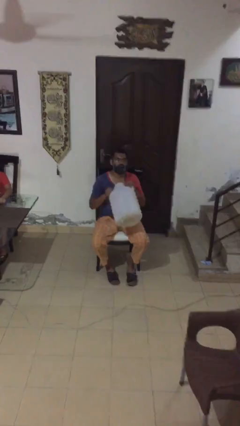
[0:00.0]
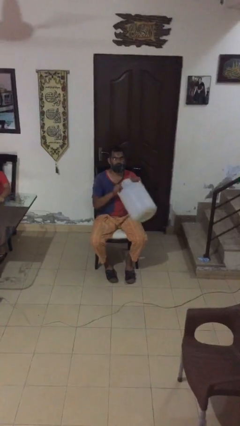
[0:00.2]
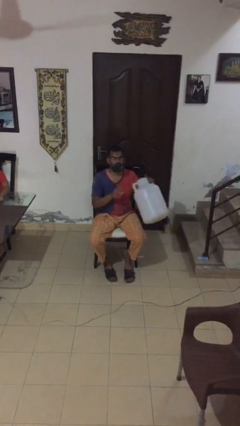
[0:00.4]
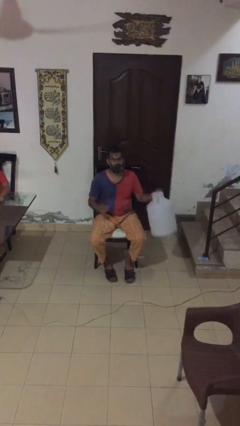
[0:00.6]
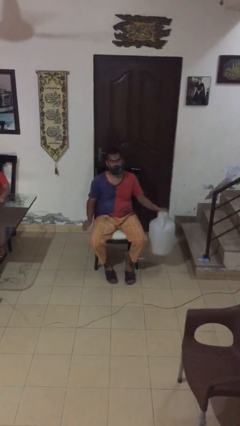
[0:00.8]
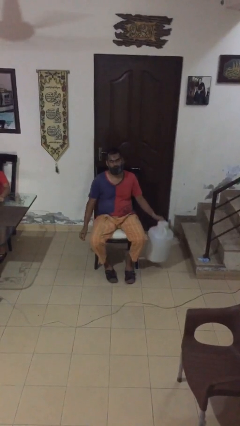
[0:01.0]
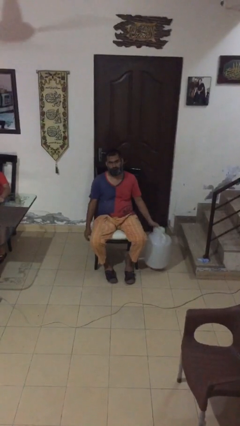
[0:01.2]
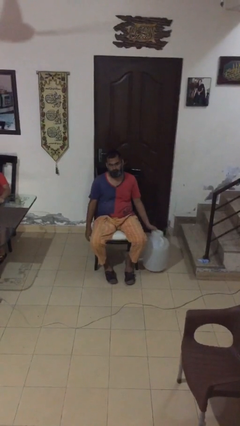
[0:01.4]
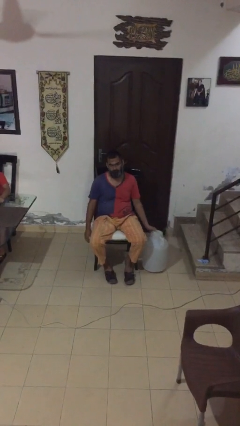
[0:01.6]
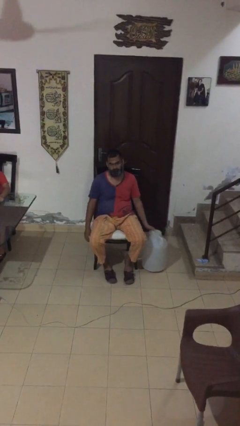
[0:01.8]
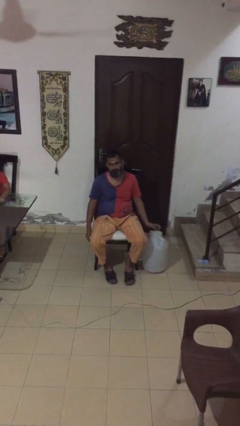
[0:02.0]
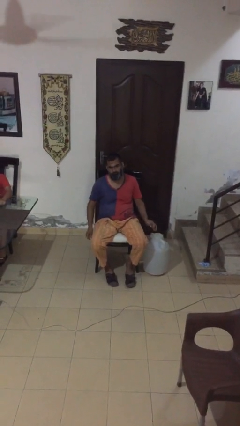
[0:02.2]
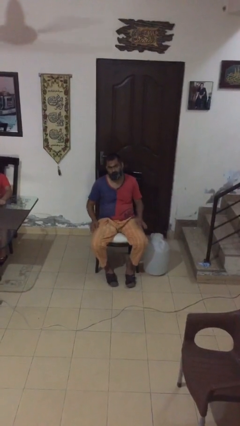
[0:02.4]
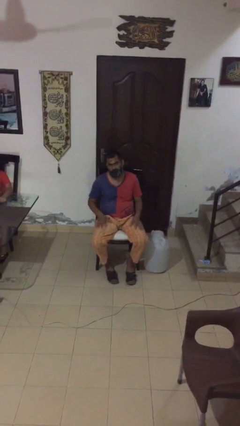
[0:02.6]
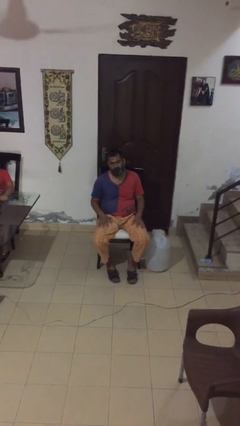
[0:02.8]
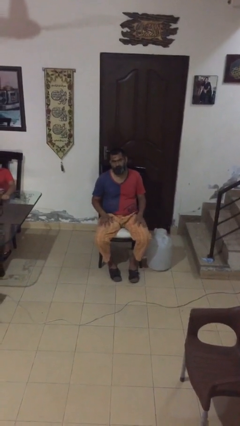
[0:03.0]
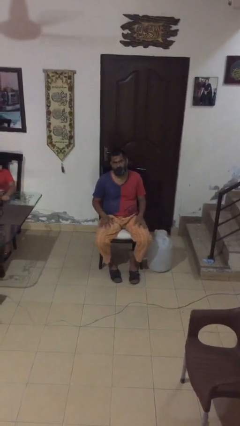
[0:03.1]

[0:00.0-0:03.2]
person puts down object on floor

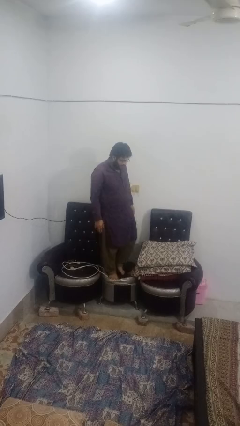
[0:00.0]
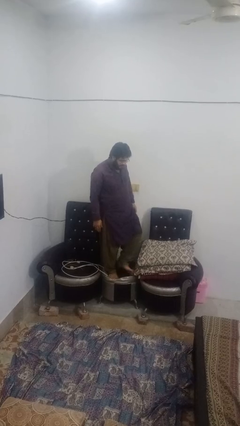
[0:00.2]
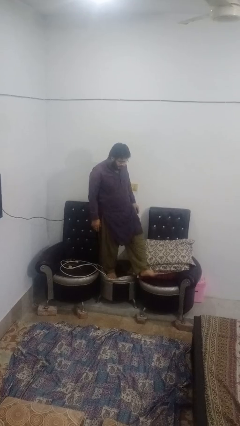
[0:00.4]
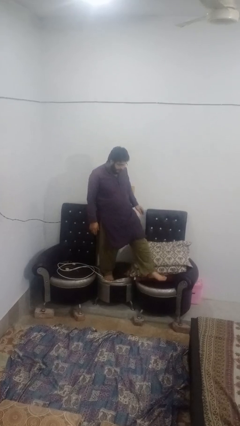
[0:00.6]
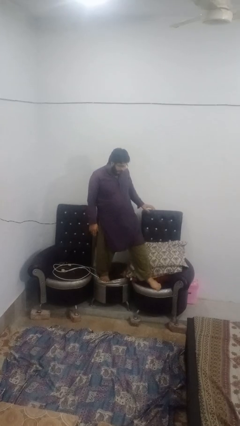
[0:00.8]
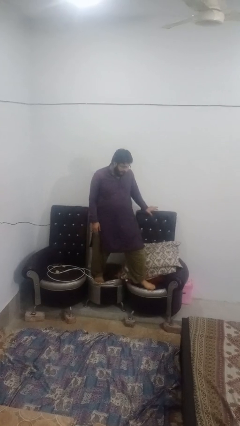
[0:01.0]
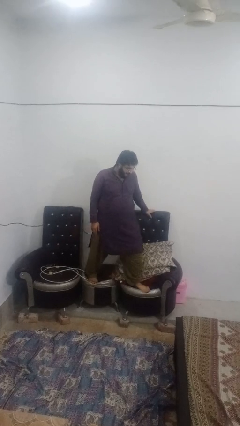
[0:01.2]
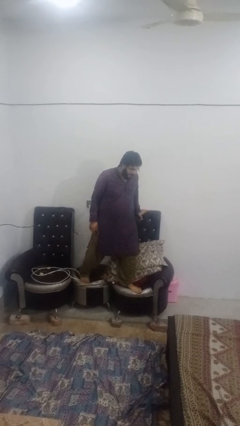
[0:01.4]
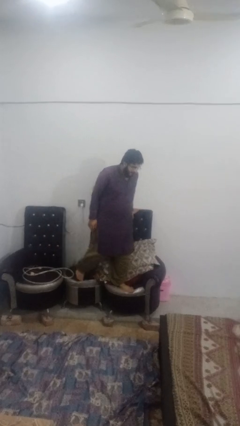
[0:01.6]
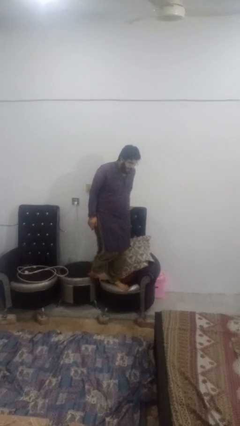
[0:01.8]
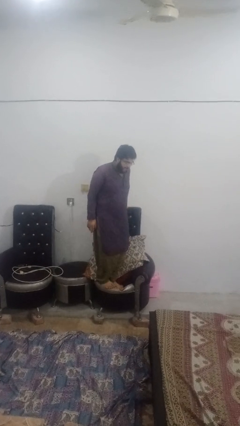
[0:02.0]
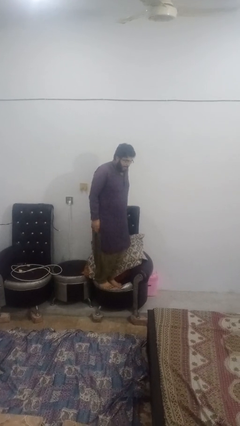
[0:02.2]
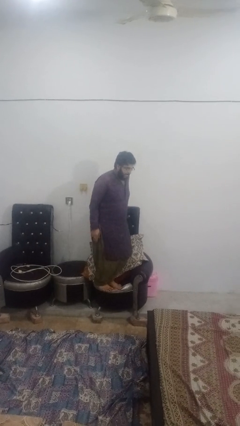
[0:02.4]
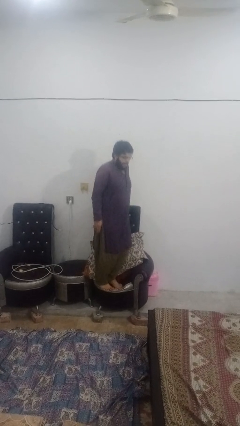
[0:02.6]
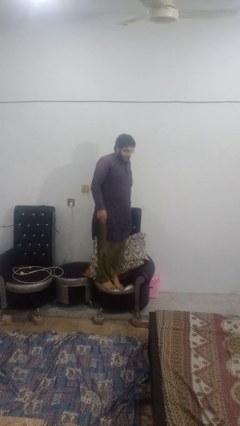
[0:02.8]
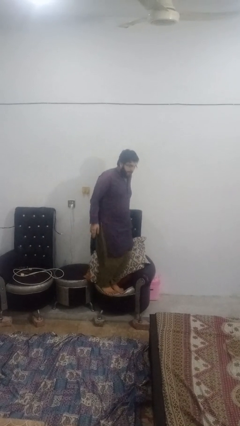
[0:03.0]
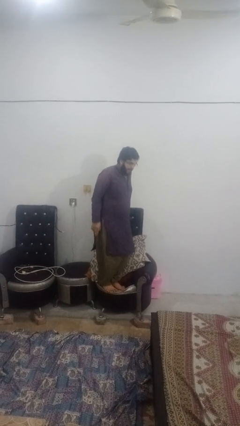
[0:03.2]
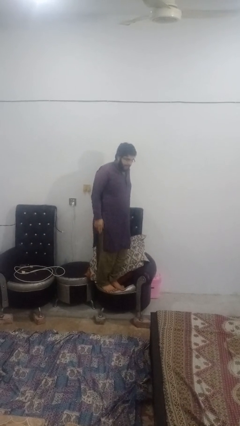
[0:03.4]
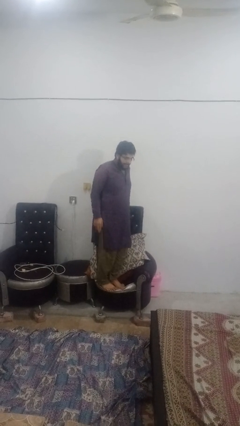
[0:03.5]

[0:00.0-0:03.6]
person jumps on couch

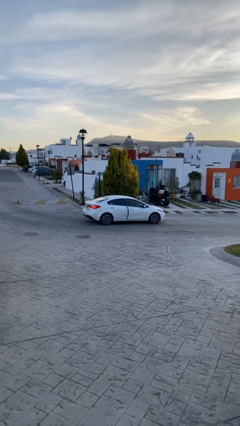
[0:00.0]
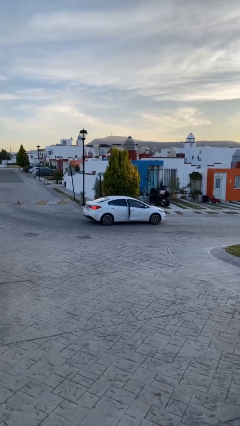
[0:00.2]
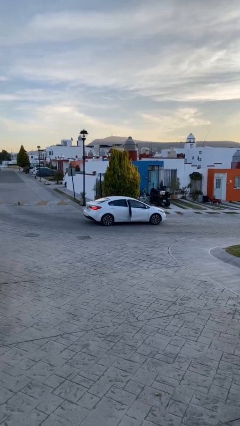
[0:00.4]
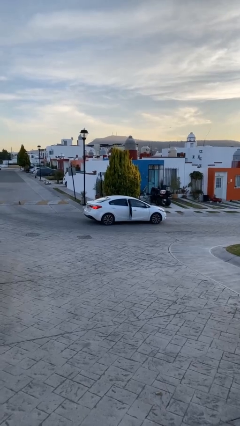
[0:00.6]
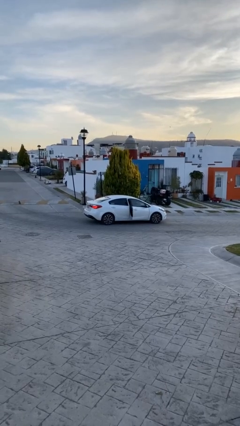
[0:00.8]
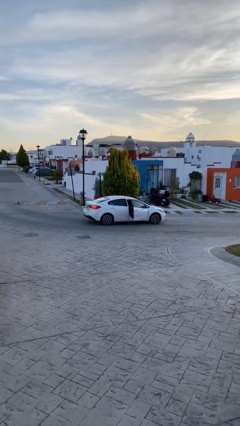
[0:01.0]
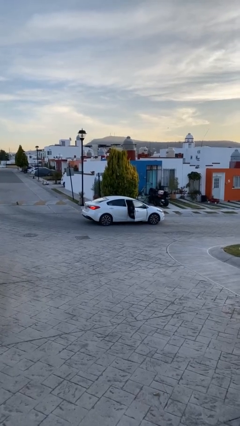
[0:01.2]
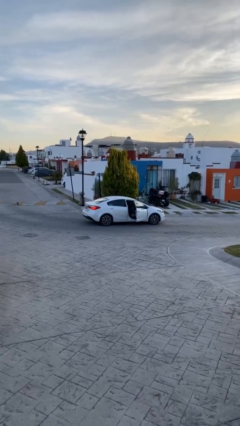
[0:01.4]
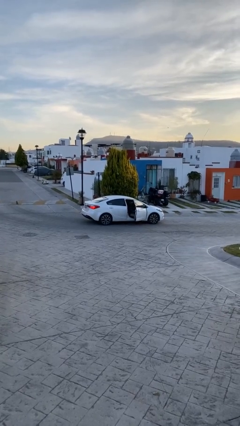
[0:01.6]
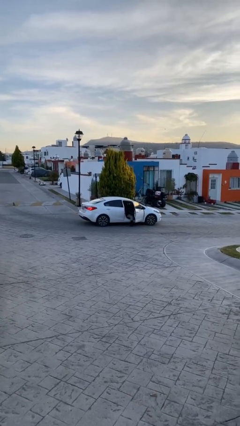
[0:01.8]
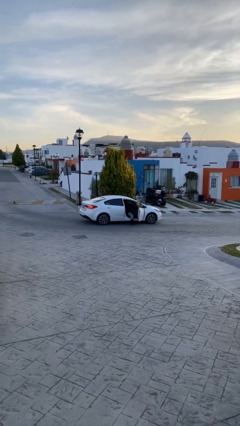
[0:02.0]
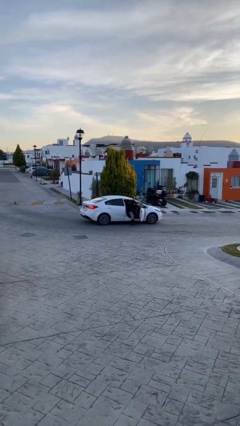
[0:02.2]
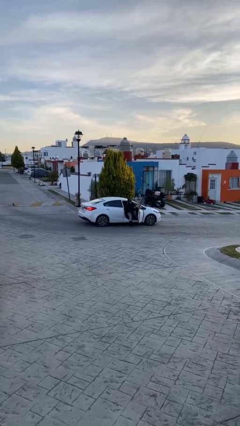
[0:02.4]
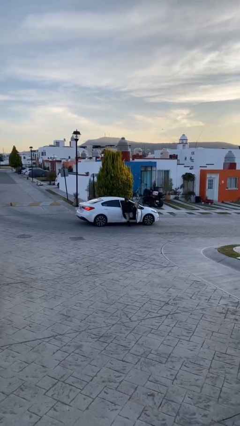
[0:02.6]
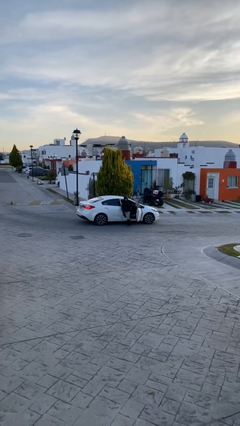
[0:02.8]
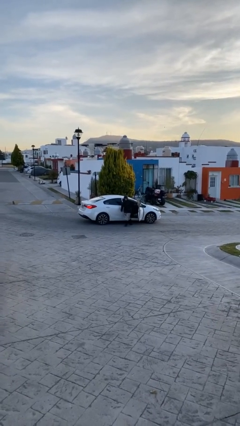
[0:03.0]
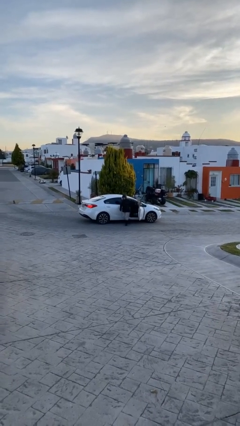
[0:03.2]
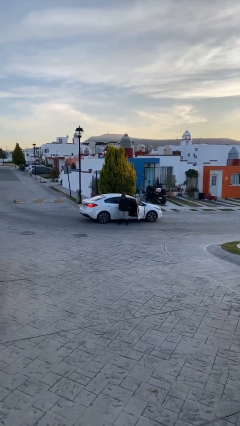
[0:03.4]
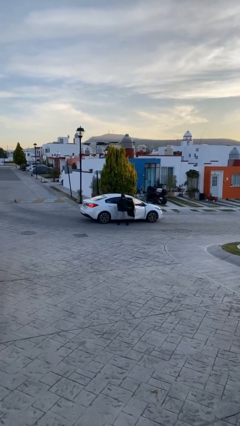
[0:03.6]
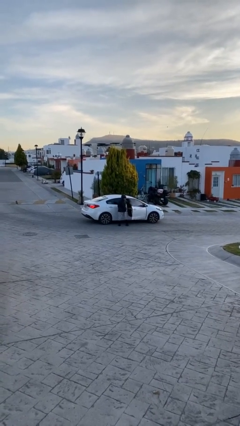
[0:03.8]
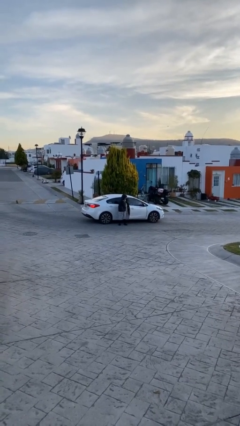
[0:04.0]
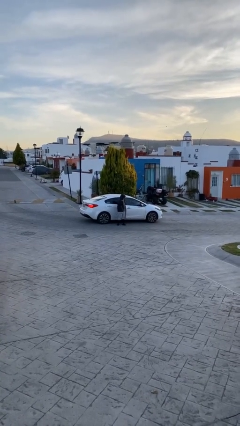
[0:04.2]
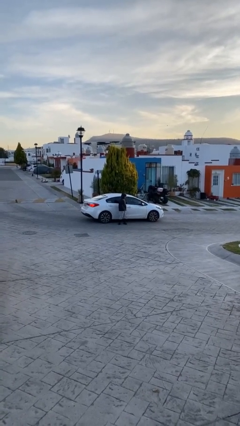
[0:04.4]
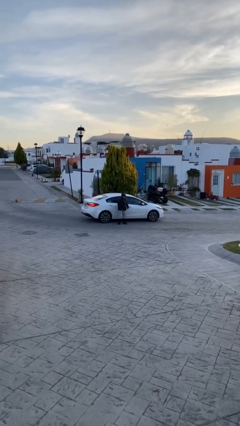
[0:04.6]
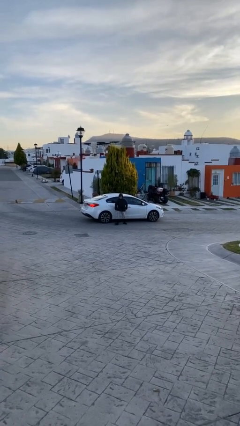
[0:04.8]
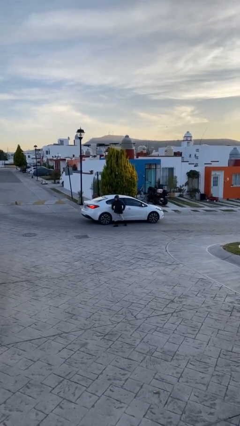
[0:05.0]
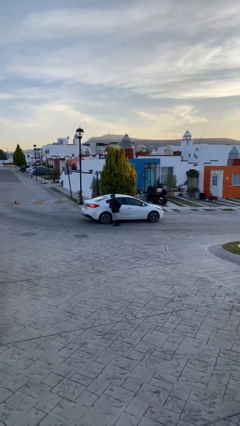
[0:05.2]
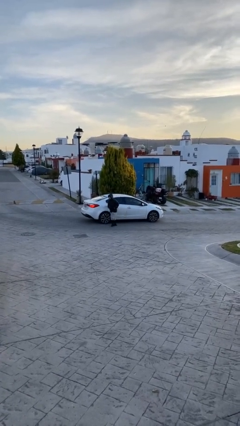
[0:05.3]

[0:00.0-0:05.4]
car drops off person

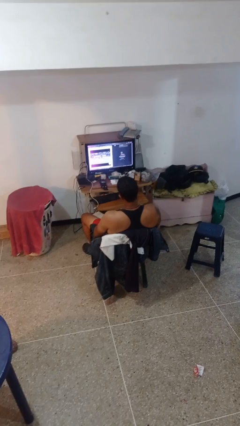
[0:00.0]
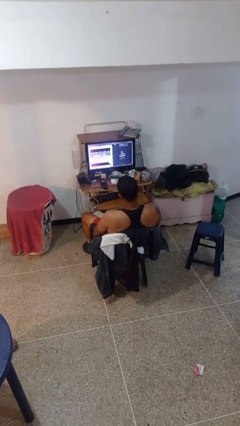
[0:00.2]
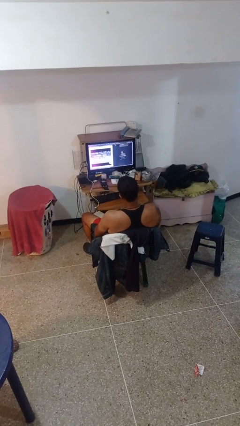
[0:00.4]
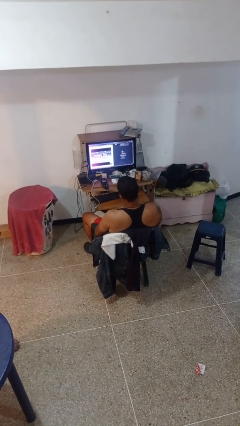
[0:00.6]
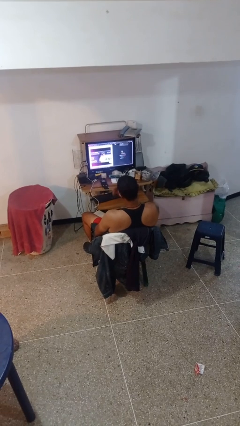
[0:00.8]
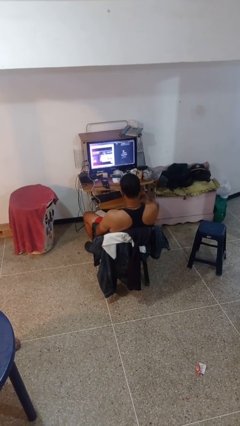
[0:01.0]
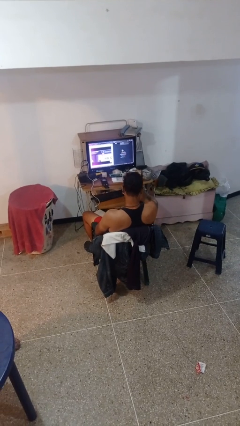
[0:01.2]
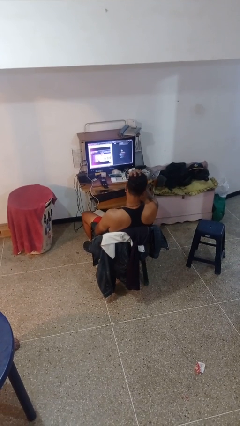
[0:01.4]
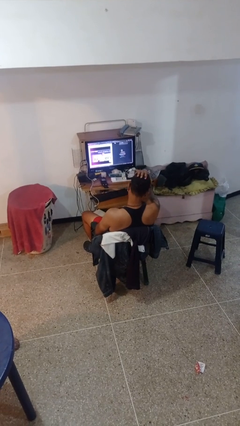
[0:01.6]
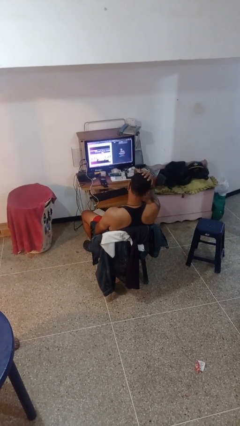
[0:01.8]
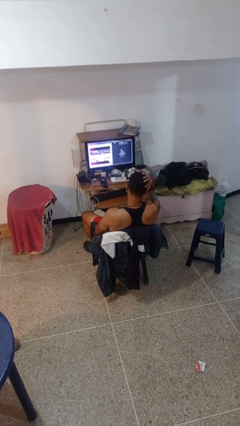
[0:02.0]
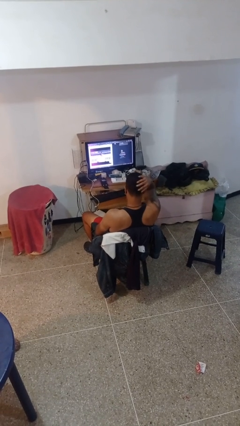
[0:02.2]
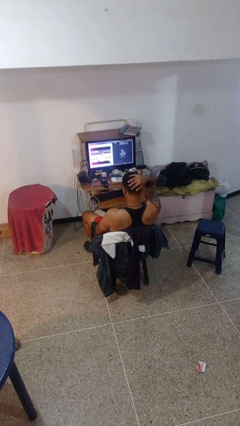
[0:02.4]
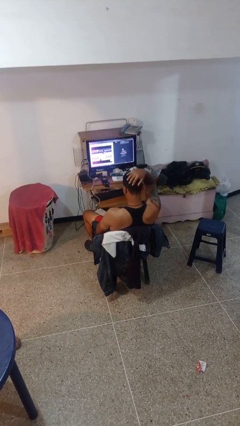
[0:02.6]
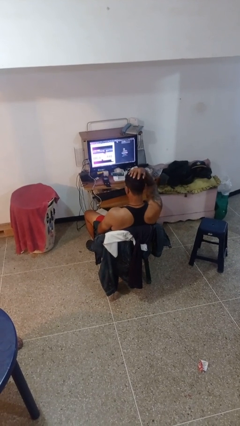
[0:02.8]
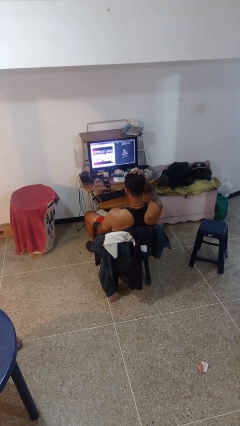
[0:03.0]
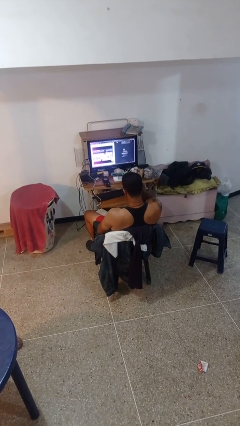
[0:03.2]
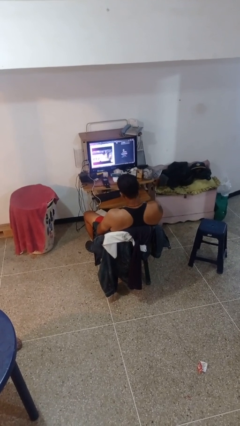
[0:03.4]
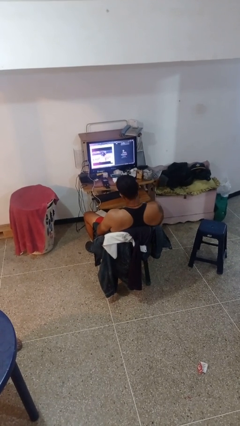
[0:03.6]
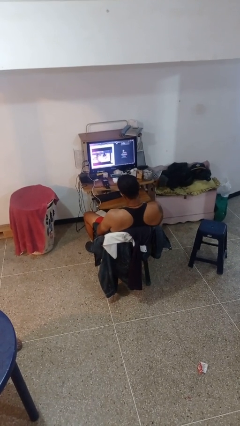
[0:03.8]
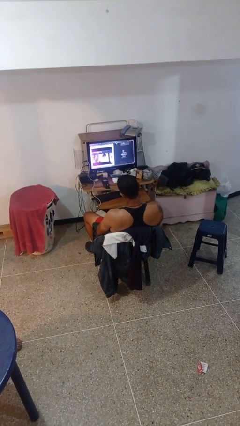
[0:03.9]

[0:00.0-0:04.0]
person pats head

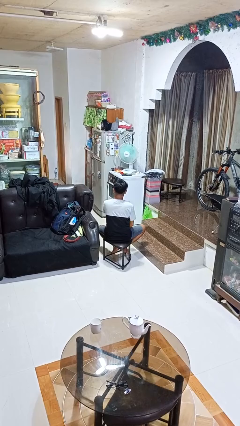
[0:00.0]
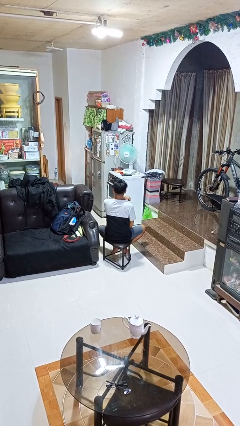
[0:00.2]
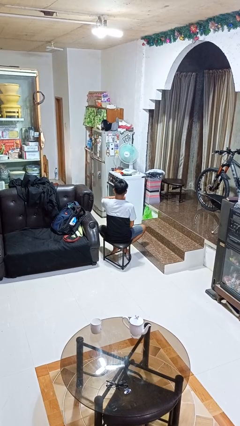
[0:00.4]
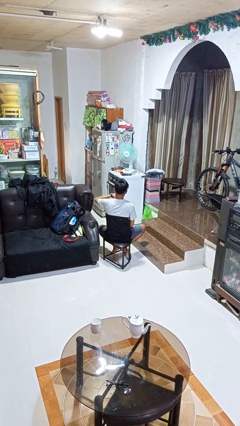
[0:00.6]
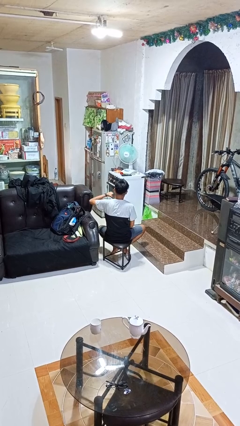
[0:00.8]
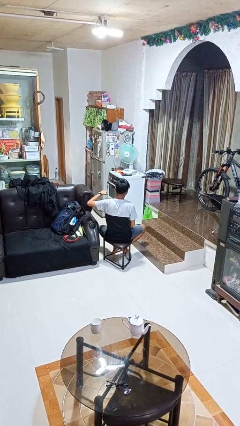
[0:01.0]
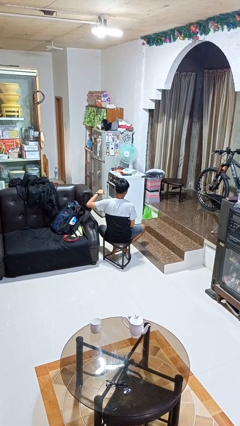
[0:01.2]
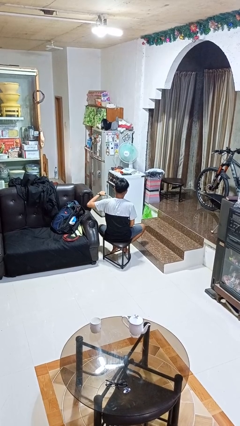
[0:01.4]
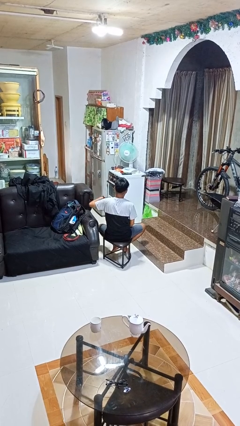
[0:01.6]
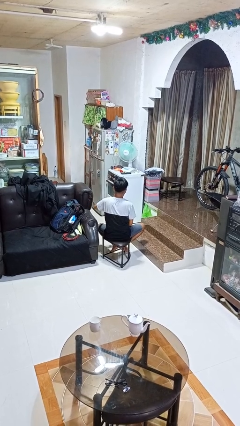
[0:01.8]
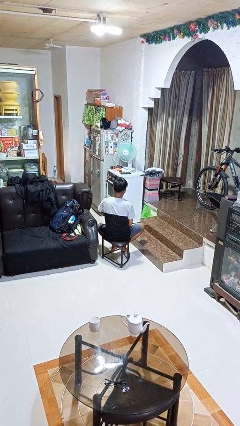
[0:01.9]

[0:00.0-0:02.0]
person gestures cut
